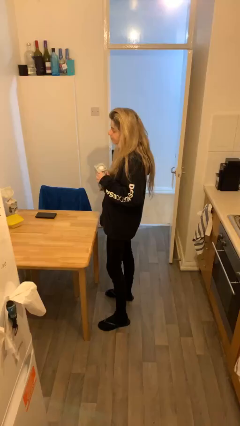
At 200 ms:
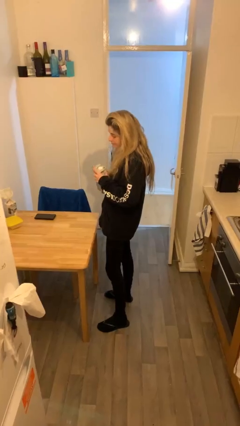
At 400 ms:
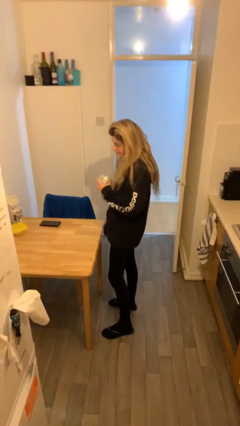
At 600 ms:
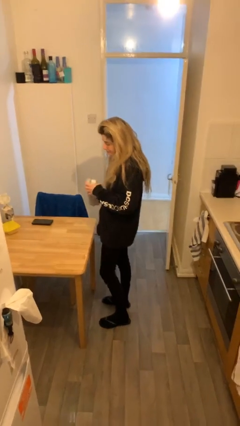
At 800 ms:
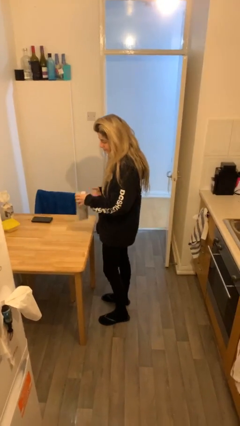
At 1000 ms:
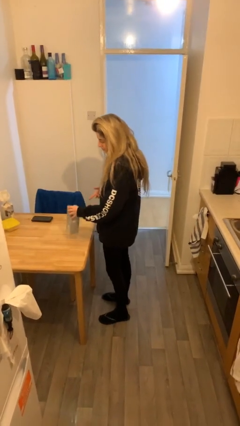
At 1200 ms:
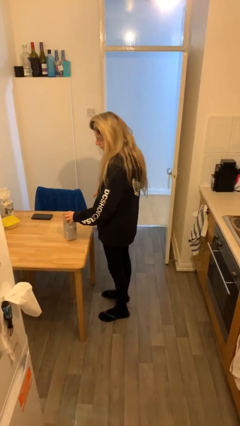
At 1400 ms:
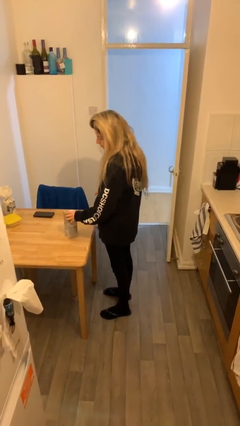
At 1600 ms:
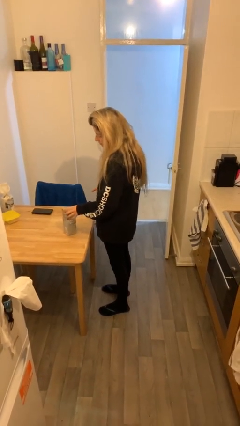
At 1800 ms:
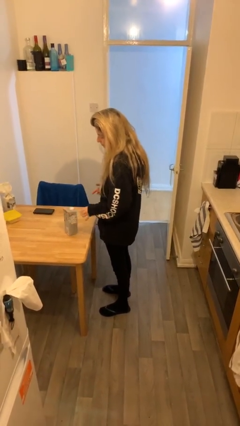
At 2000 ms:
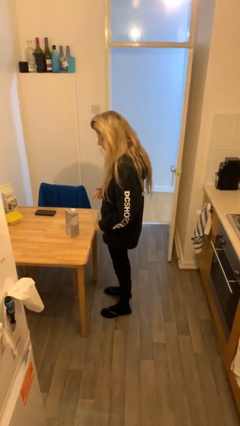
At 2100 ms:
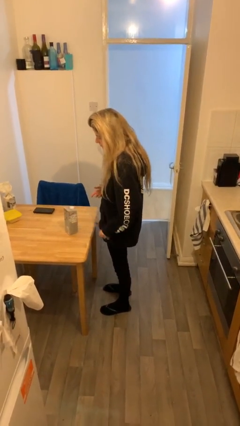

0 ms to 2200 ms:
person puts down object on table

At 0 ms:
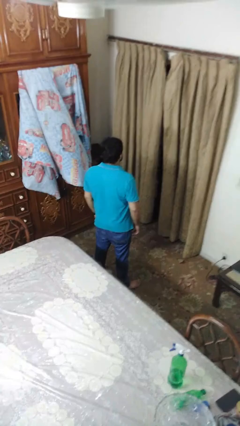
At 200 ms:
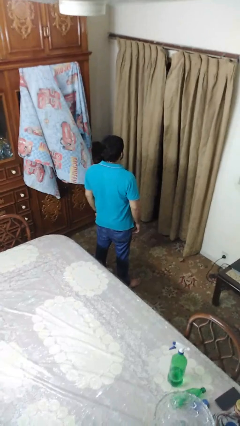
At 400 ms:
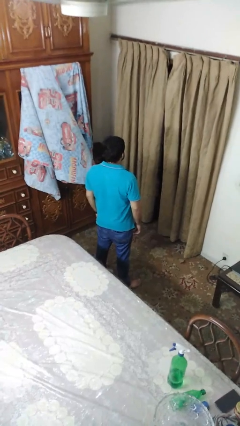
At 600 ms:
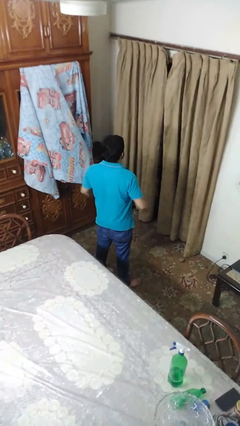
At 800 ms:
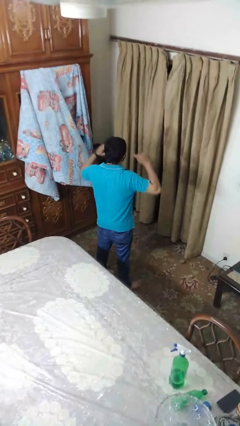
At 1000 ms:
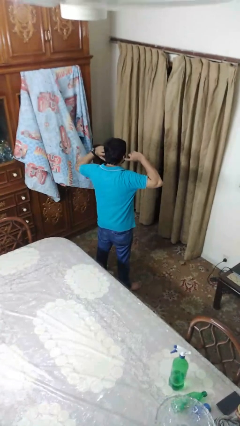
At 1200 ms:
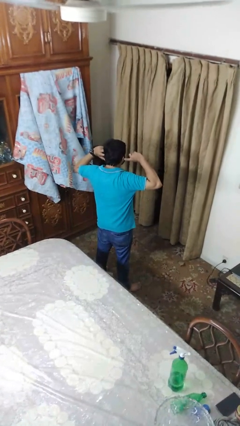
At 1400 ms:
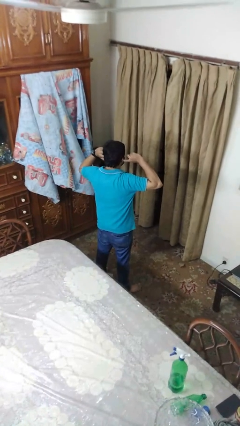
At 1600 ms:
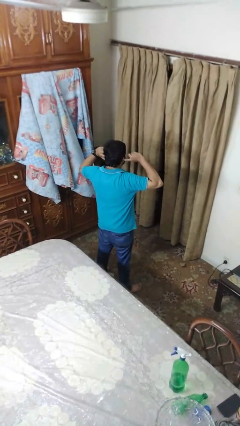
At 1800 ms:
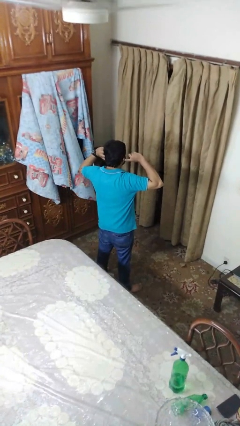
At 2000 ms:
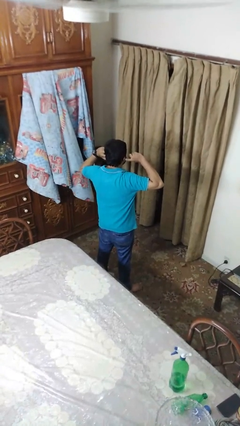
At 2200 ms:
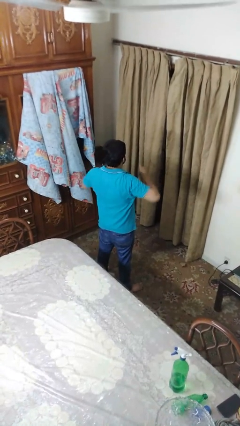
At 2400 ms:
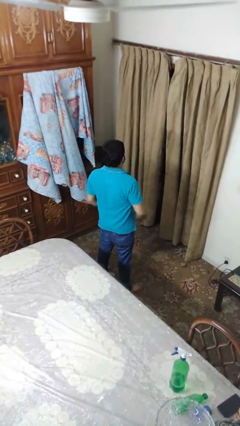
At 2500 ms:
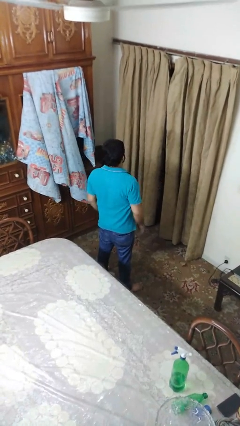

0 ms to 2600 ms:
person puts fingers in ear

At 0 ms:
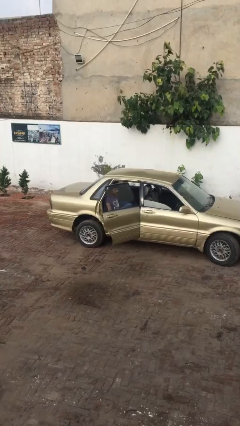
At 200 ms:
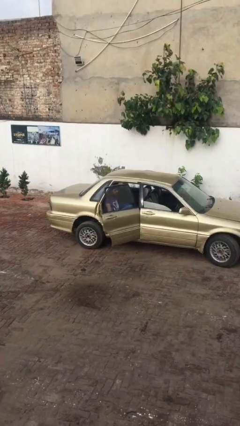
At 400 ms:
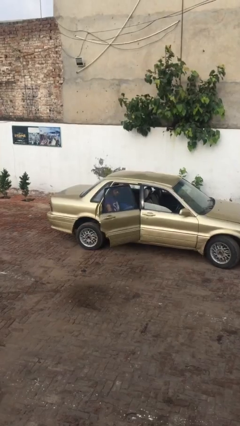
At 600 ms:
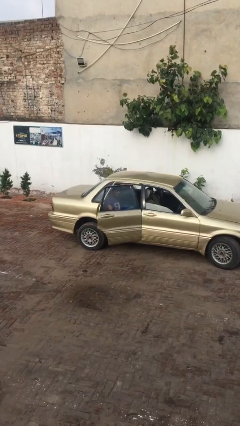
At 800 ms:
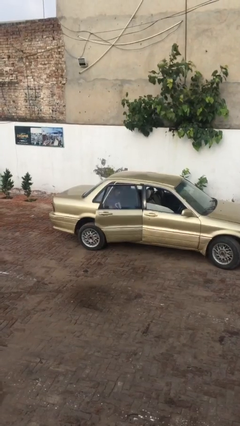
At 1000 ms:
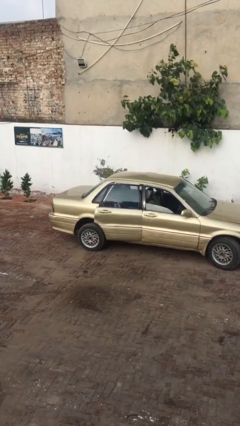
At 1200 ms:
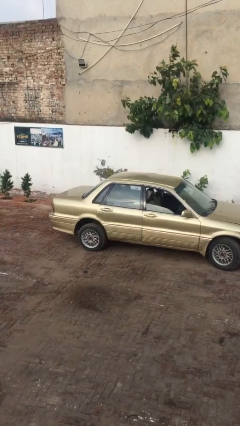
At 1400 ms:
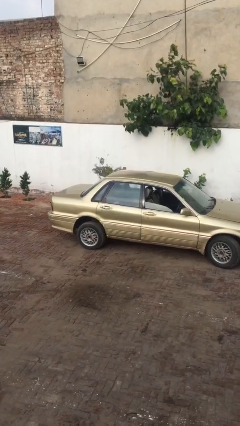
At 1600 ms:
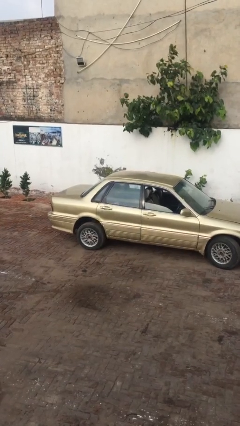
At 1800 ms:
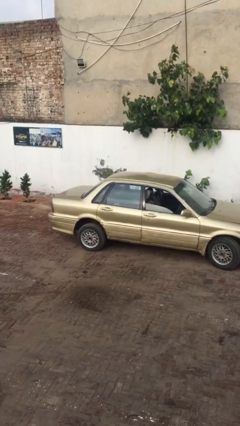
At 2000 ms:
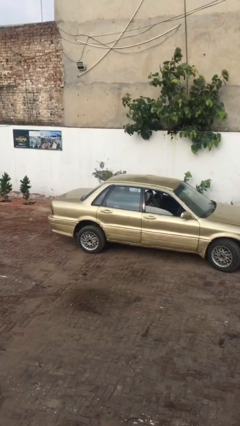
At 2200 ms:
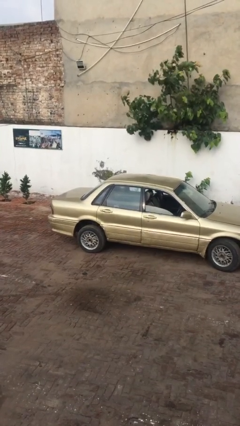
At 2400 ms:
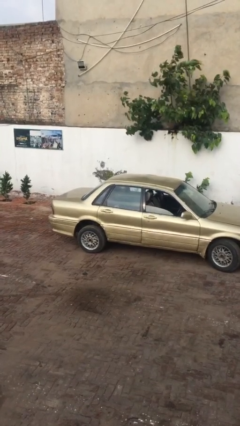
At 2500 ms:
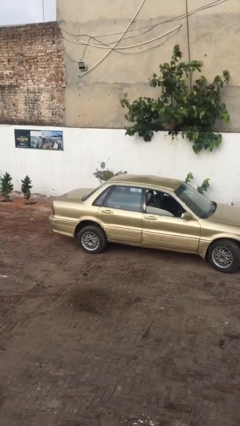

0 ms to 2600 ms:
person closes car door

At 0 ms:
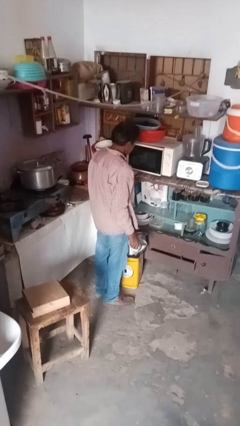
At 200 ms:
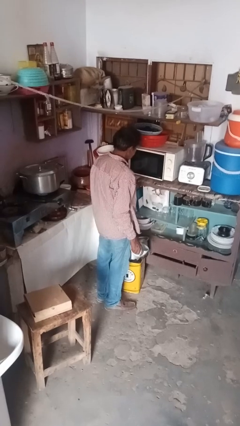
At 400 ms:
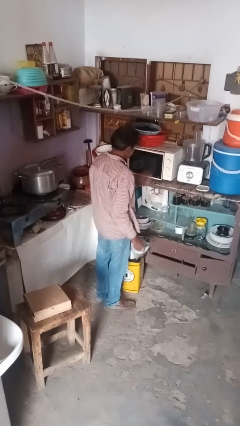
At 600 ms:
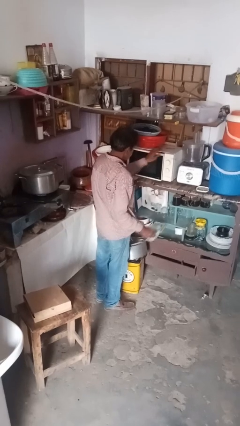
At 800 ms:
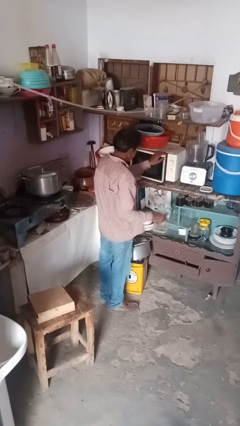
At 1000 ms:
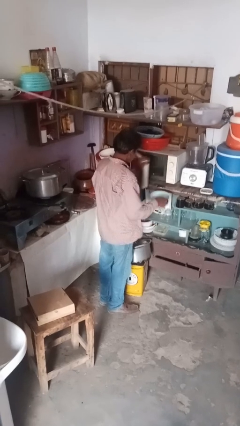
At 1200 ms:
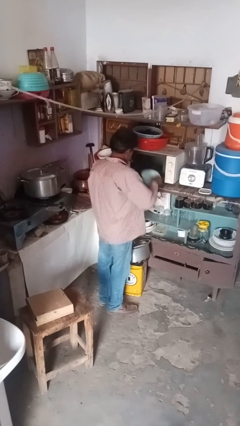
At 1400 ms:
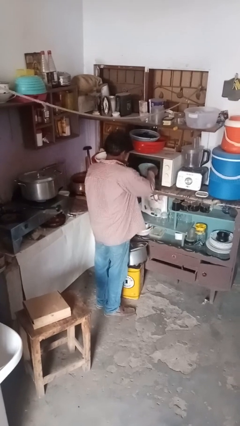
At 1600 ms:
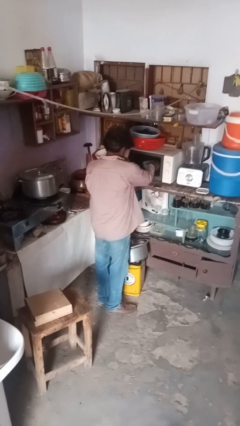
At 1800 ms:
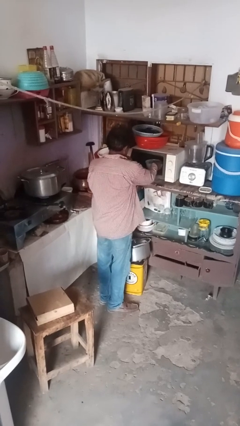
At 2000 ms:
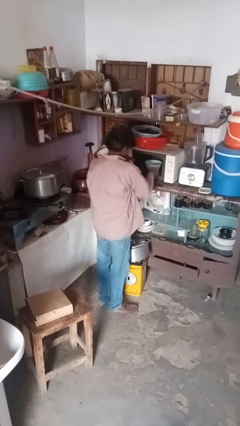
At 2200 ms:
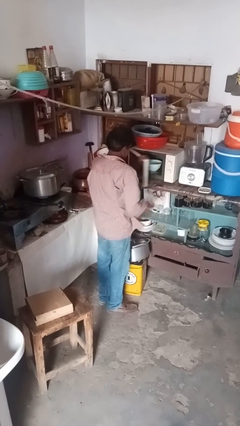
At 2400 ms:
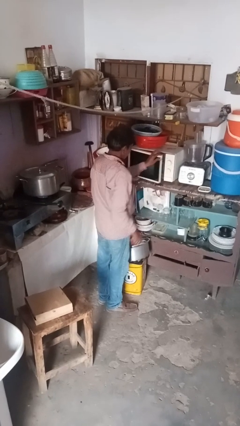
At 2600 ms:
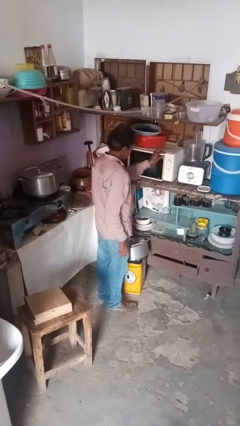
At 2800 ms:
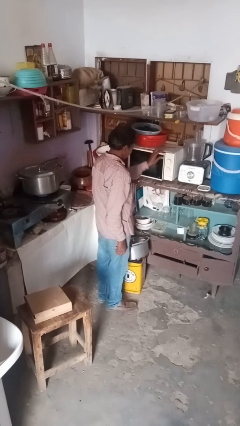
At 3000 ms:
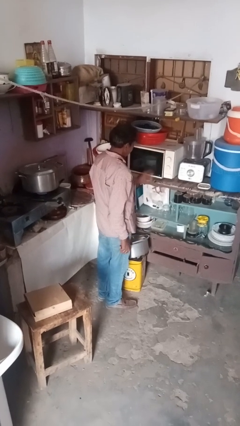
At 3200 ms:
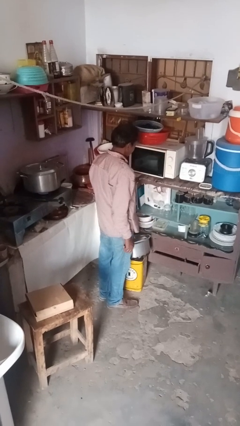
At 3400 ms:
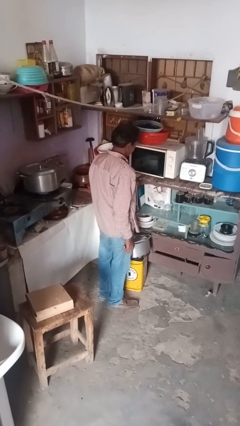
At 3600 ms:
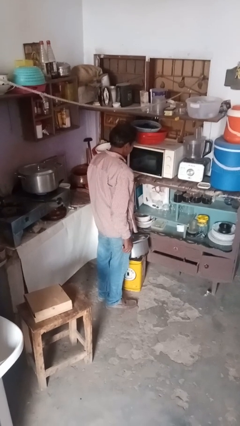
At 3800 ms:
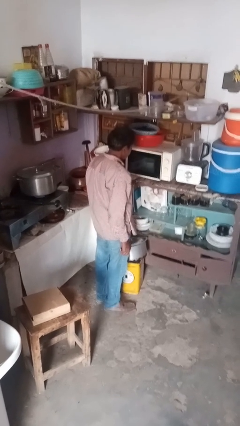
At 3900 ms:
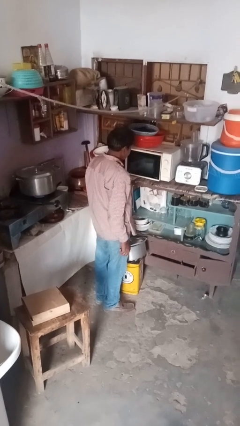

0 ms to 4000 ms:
person puts object into microwave

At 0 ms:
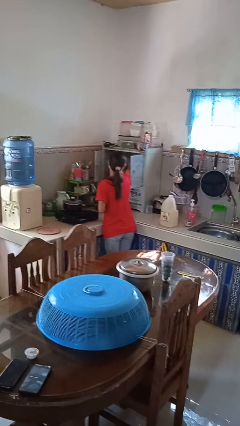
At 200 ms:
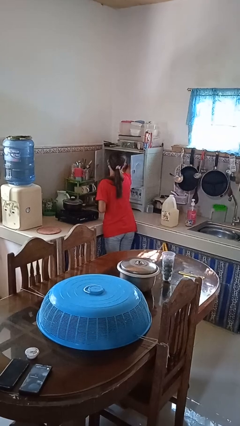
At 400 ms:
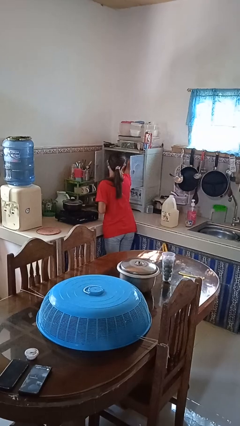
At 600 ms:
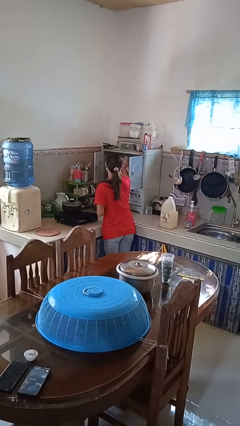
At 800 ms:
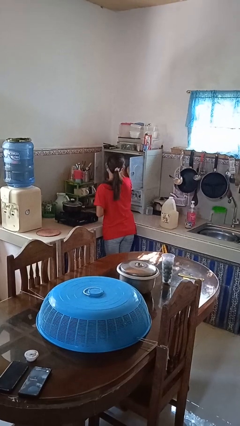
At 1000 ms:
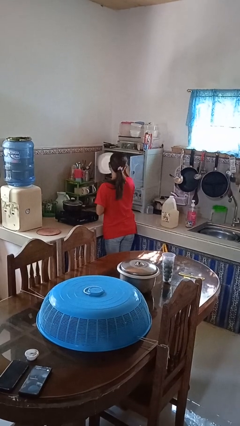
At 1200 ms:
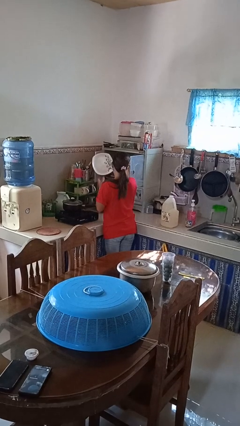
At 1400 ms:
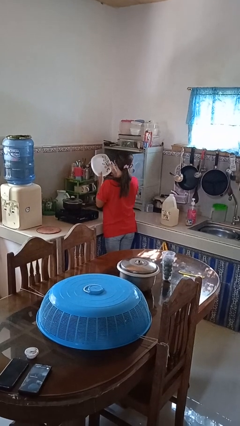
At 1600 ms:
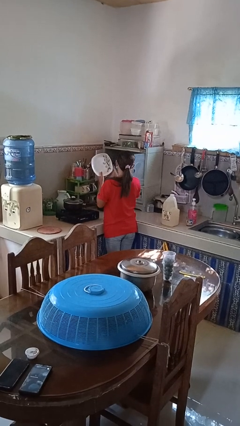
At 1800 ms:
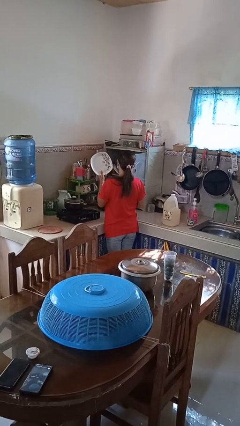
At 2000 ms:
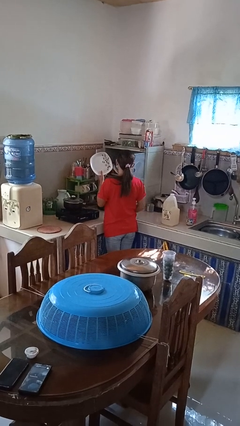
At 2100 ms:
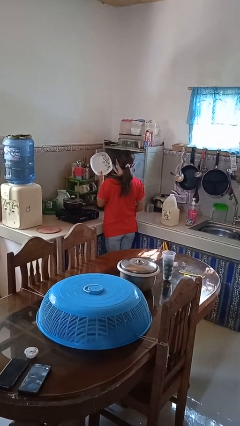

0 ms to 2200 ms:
person takes object from cabinet

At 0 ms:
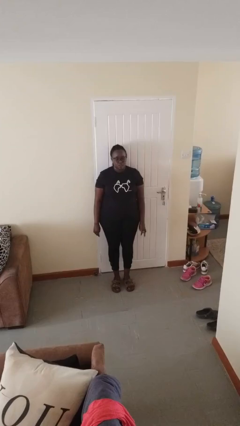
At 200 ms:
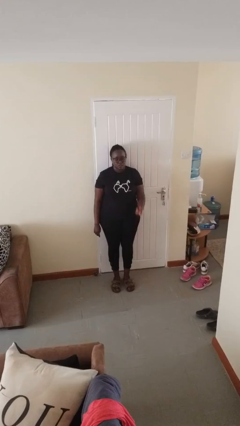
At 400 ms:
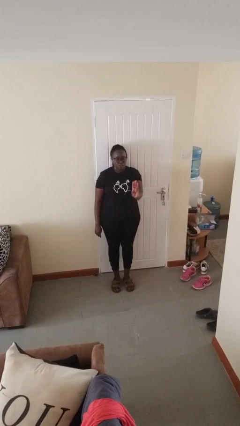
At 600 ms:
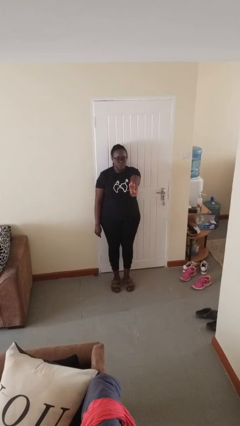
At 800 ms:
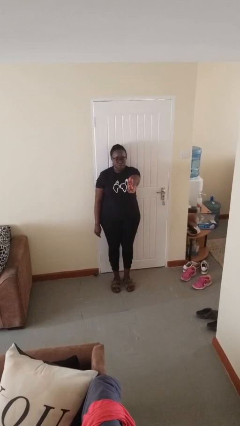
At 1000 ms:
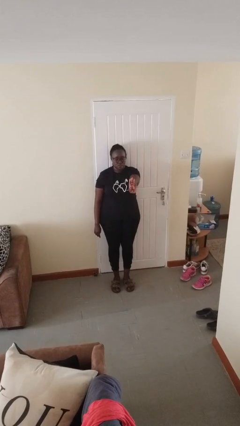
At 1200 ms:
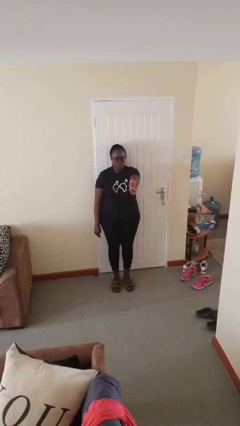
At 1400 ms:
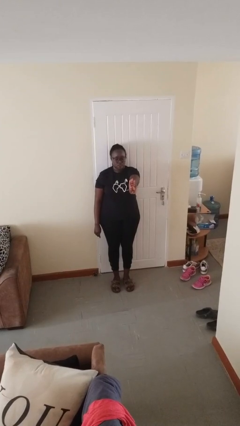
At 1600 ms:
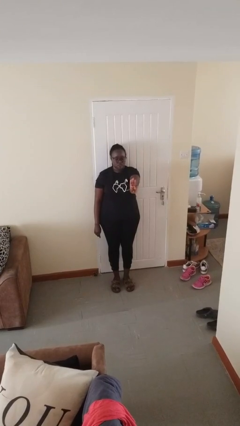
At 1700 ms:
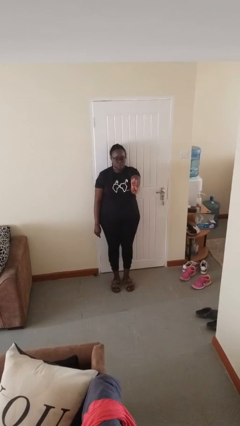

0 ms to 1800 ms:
person gestures number three

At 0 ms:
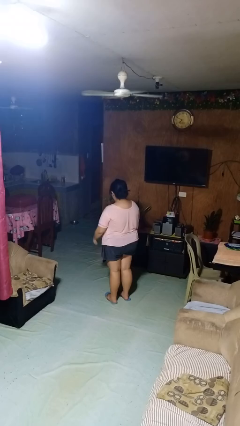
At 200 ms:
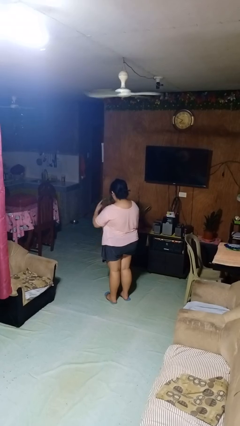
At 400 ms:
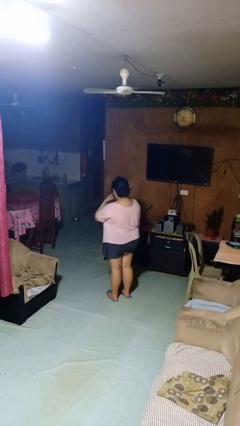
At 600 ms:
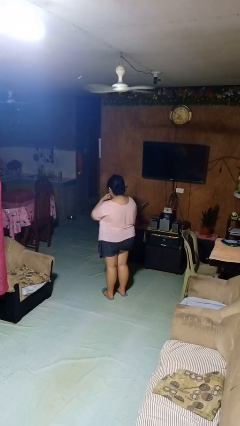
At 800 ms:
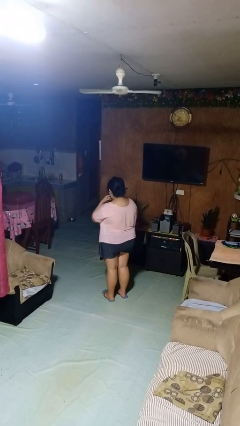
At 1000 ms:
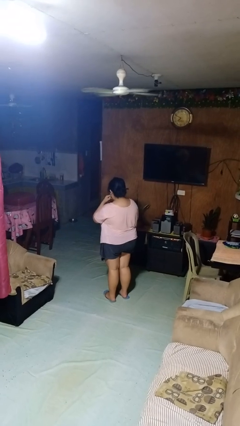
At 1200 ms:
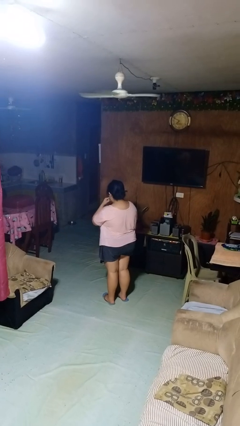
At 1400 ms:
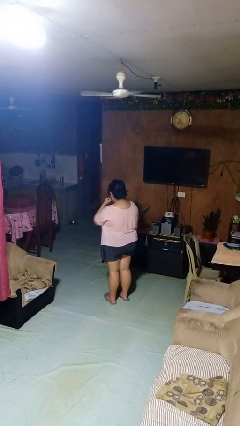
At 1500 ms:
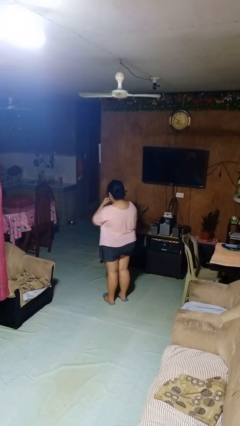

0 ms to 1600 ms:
person licks fingers

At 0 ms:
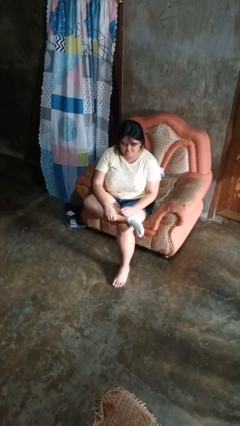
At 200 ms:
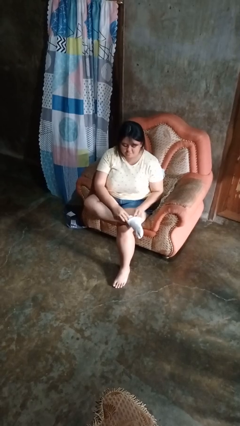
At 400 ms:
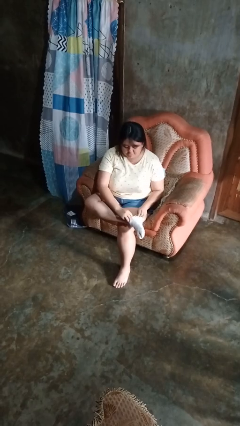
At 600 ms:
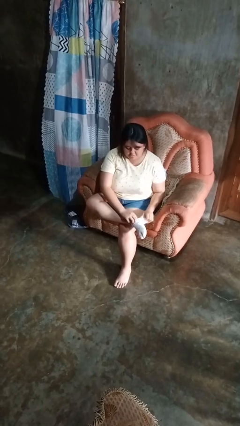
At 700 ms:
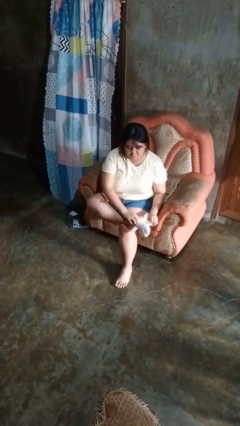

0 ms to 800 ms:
person takes off socks
